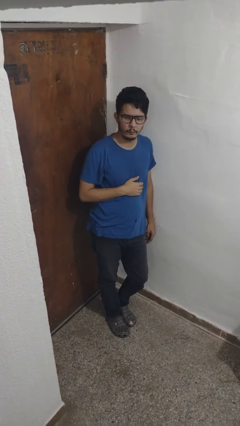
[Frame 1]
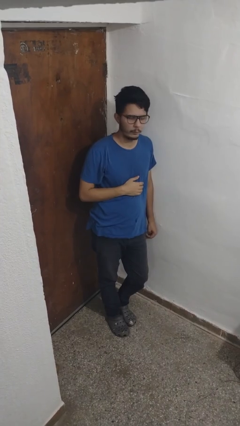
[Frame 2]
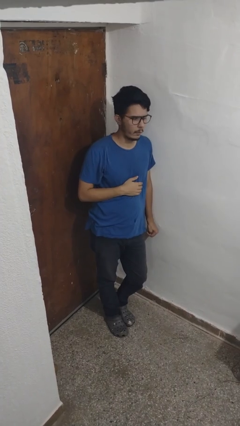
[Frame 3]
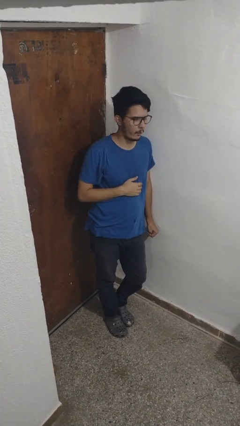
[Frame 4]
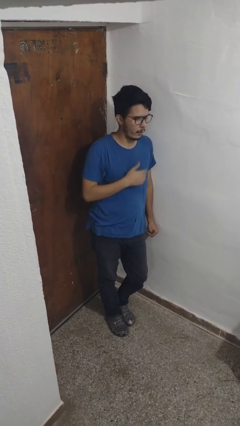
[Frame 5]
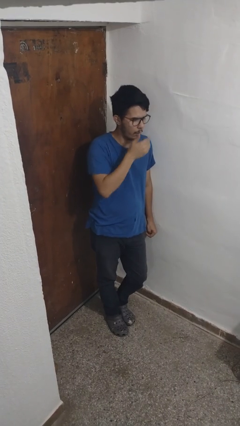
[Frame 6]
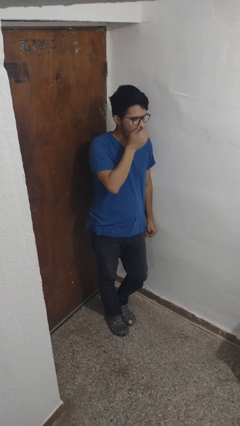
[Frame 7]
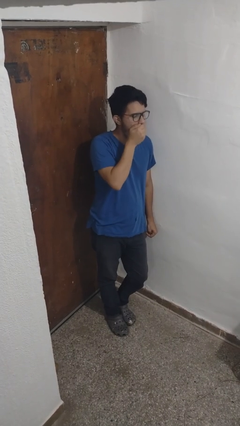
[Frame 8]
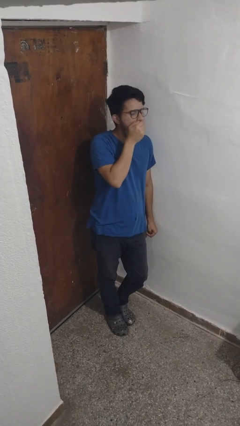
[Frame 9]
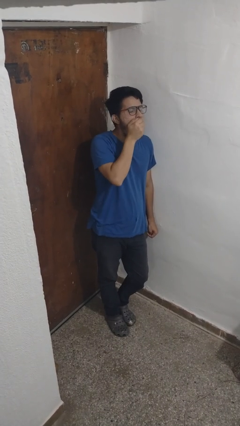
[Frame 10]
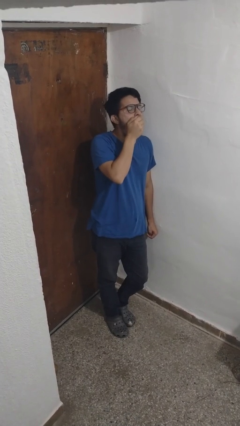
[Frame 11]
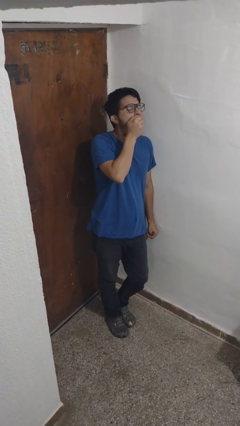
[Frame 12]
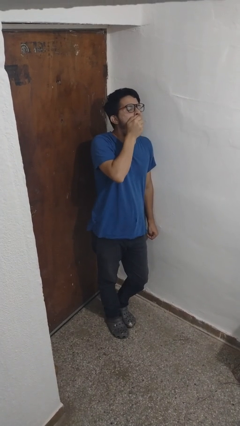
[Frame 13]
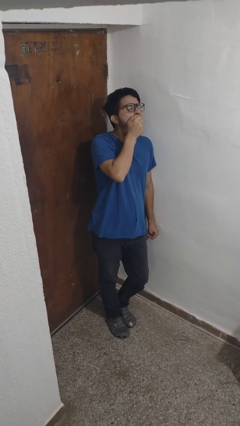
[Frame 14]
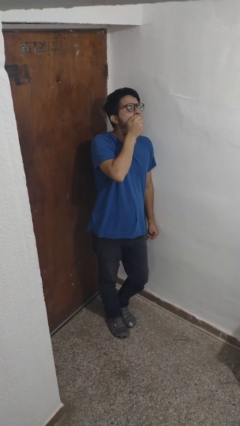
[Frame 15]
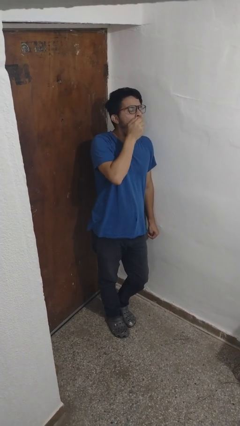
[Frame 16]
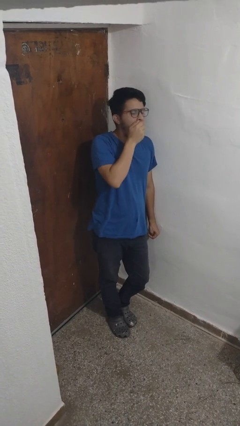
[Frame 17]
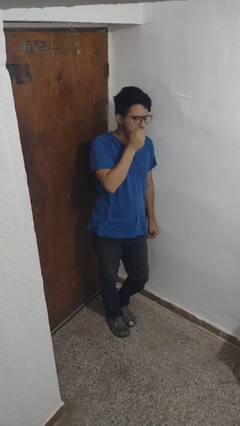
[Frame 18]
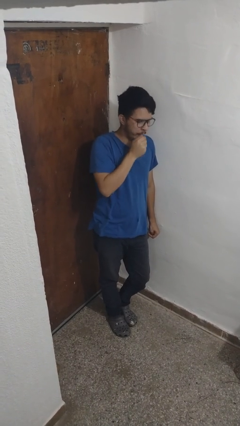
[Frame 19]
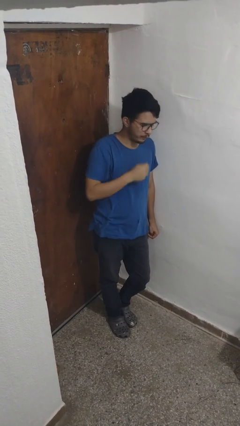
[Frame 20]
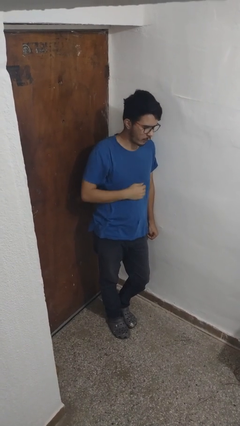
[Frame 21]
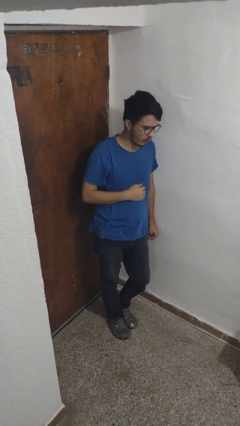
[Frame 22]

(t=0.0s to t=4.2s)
person yawns

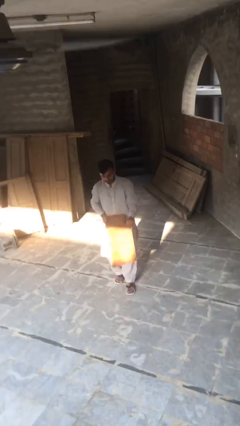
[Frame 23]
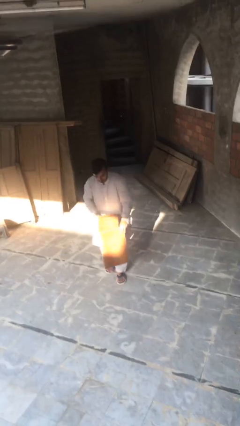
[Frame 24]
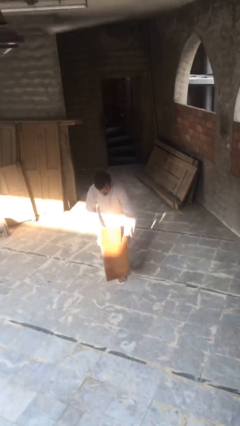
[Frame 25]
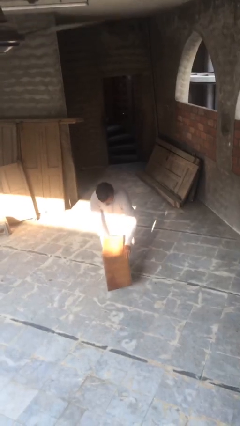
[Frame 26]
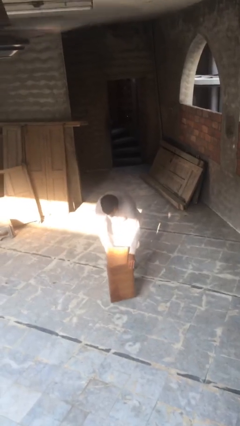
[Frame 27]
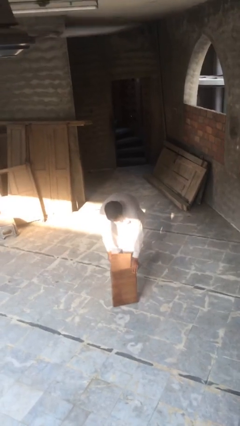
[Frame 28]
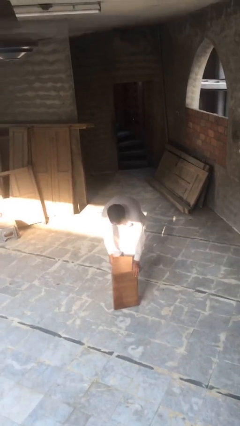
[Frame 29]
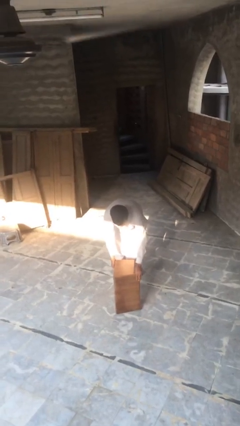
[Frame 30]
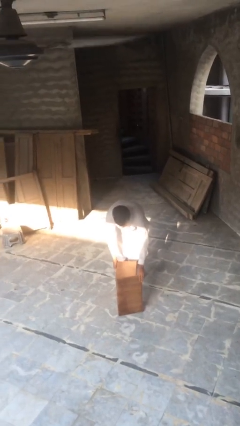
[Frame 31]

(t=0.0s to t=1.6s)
person puts down object on floor

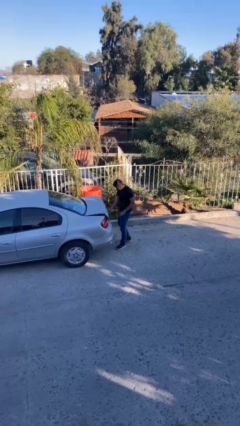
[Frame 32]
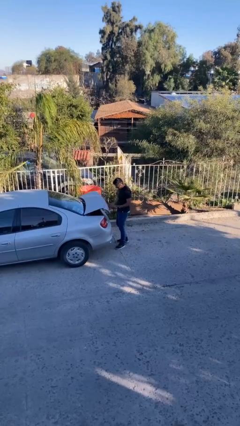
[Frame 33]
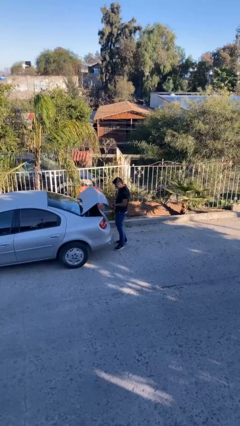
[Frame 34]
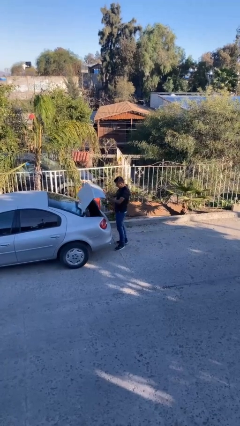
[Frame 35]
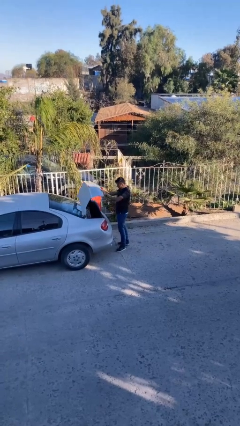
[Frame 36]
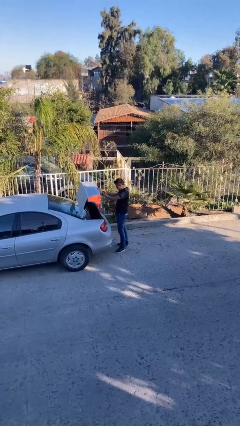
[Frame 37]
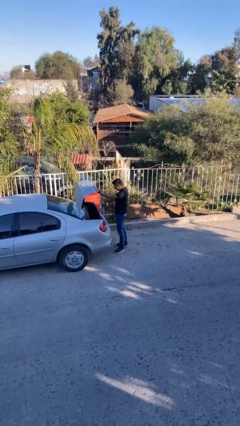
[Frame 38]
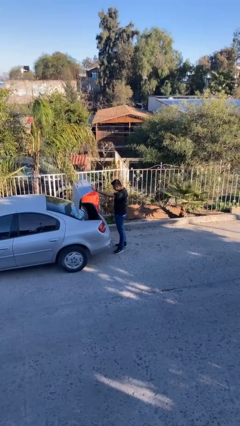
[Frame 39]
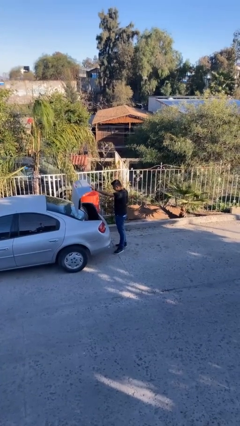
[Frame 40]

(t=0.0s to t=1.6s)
person opens car trunk

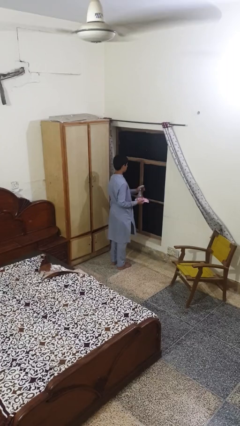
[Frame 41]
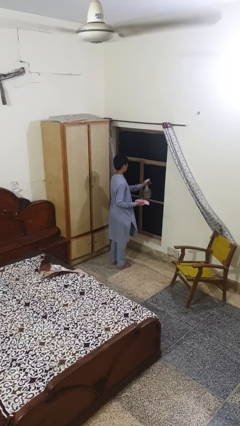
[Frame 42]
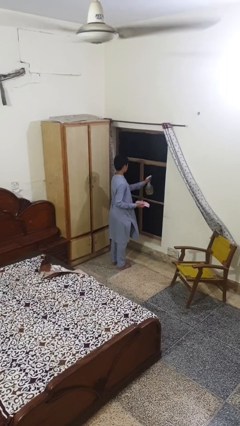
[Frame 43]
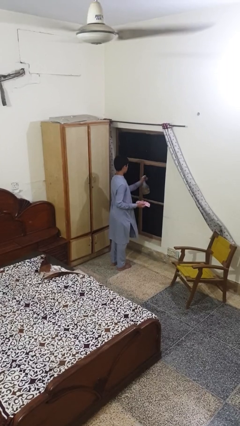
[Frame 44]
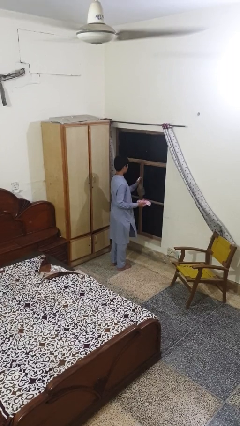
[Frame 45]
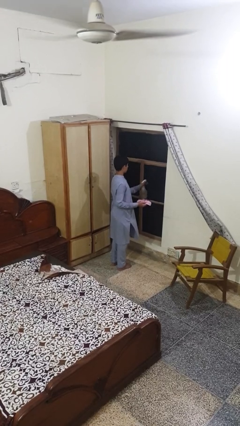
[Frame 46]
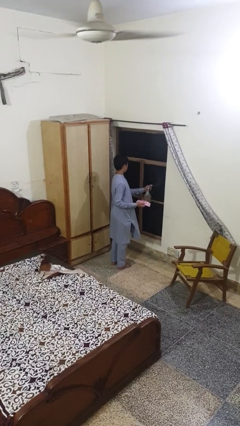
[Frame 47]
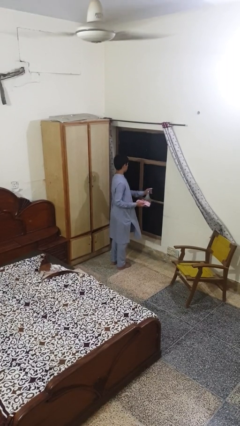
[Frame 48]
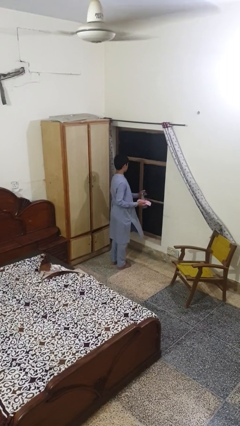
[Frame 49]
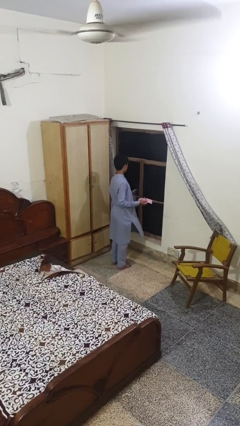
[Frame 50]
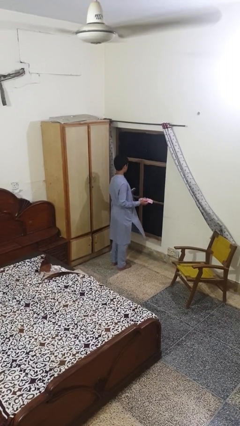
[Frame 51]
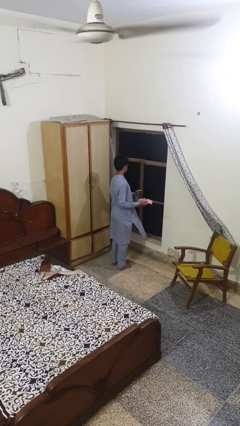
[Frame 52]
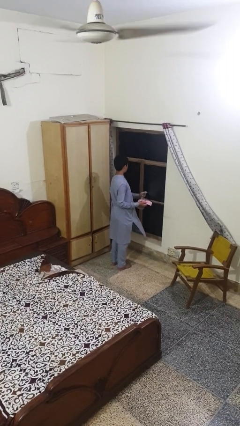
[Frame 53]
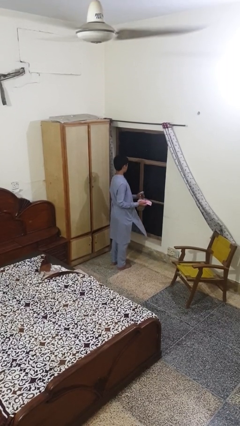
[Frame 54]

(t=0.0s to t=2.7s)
person sprays from bottle

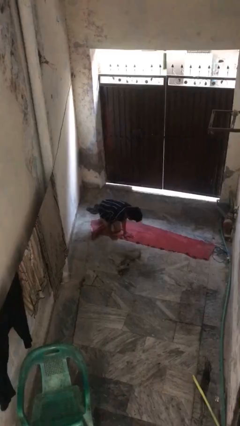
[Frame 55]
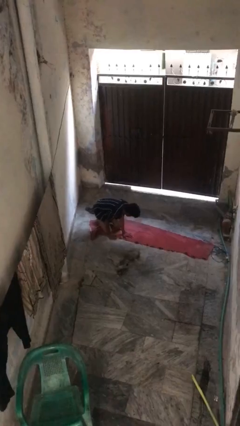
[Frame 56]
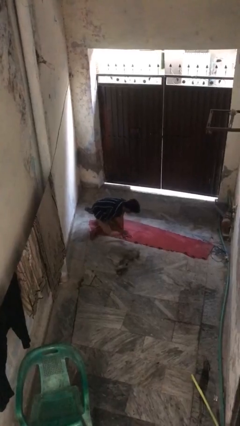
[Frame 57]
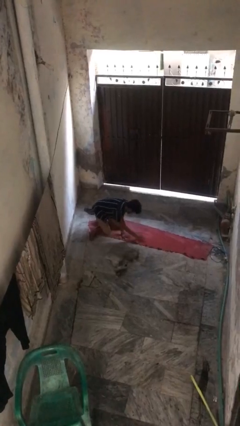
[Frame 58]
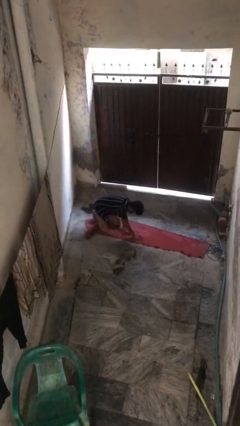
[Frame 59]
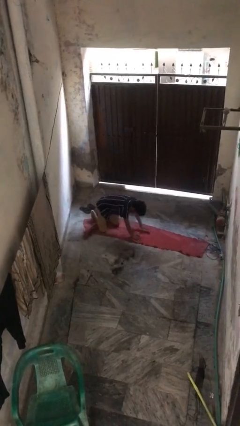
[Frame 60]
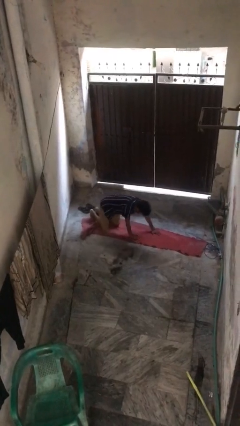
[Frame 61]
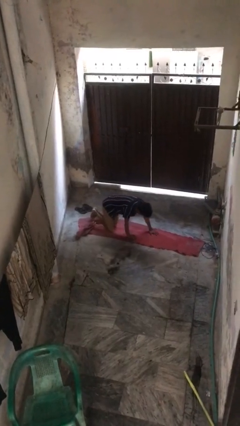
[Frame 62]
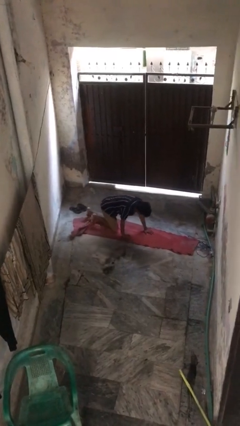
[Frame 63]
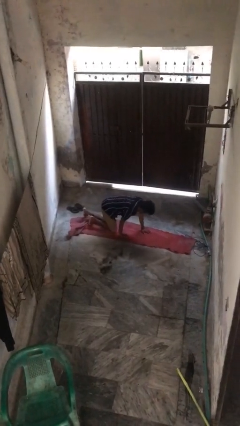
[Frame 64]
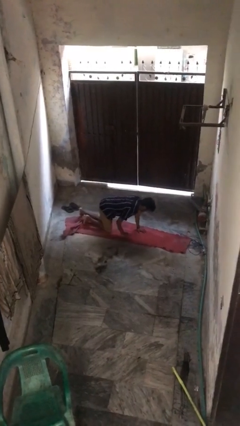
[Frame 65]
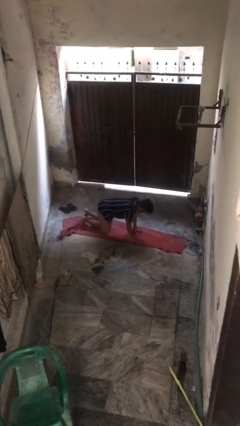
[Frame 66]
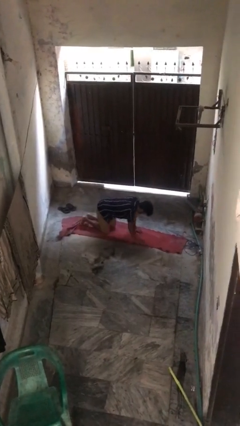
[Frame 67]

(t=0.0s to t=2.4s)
person crawls

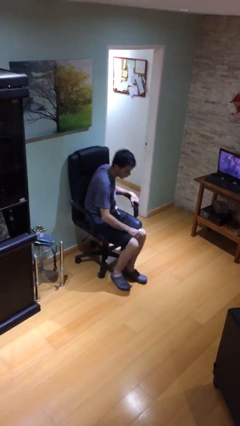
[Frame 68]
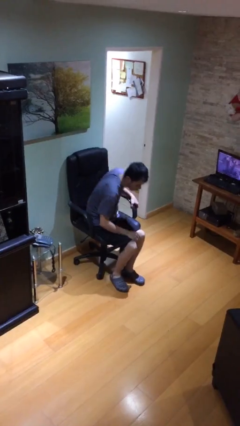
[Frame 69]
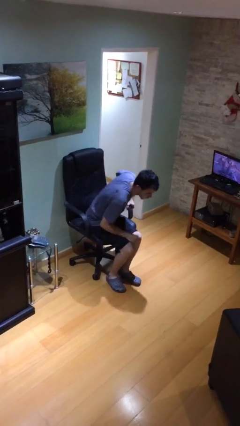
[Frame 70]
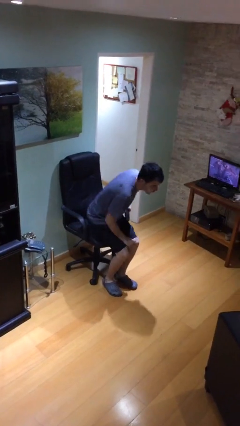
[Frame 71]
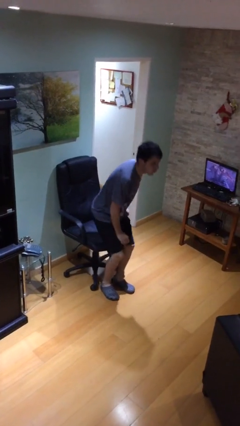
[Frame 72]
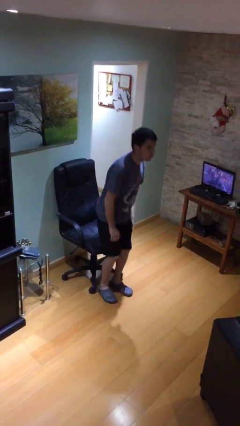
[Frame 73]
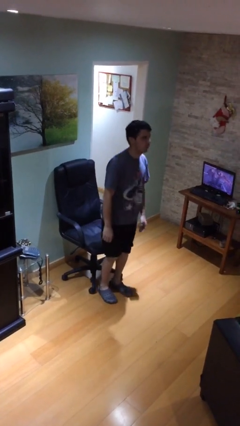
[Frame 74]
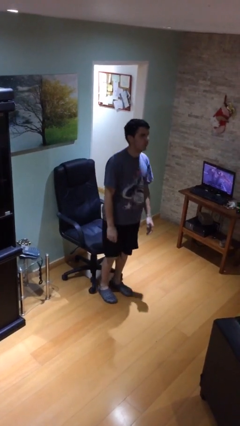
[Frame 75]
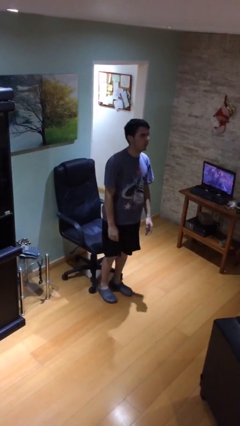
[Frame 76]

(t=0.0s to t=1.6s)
person stands up

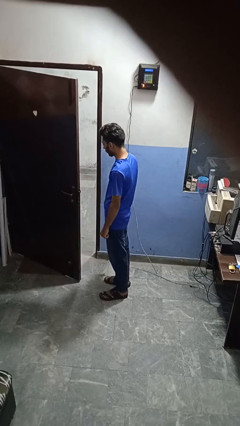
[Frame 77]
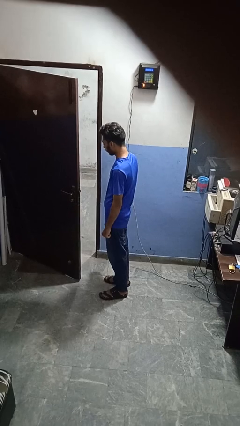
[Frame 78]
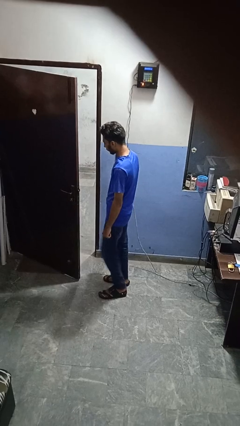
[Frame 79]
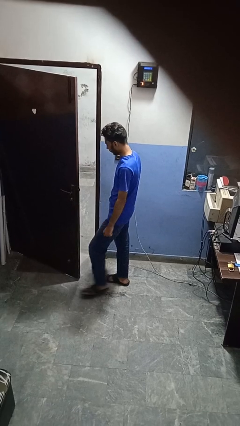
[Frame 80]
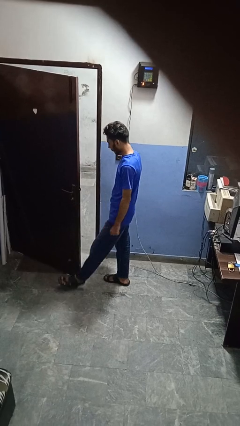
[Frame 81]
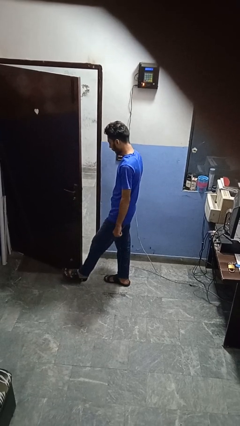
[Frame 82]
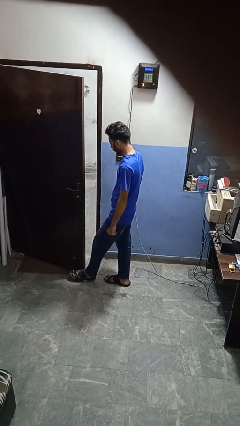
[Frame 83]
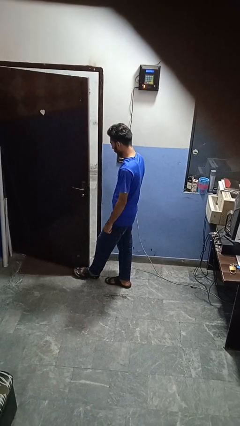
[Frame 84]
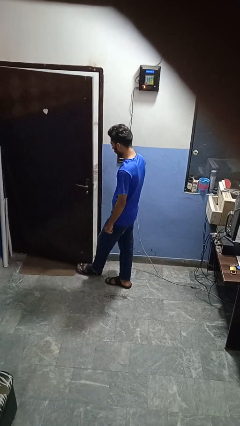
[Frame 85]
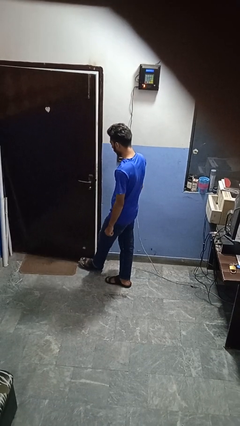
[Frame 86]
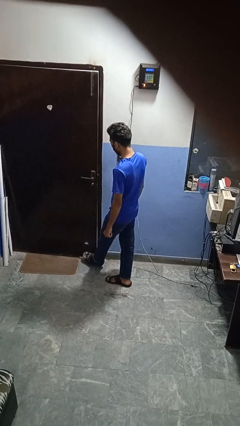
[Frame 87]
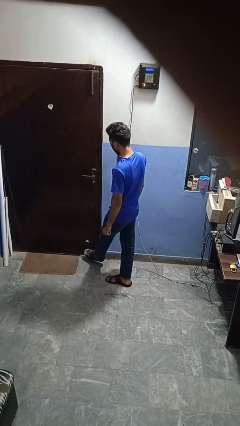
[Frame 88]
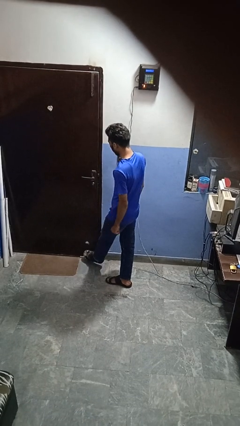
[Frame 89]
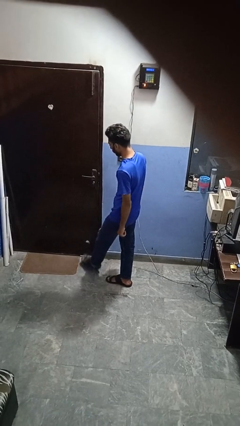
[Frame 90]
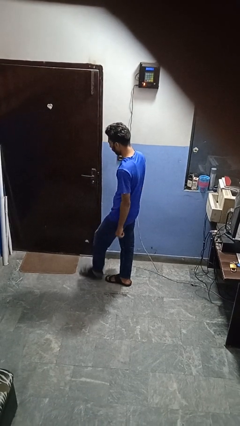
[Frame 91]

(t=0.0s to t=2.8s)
person closes door with foot

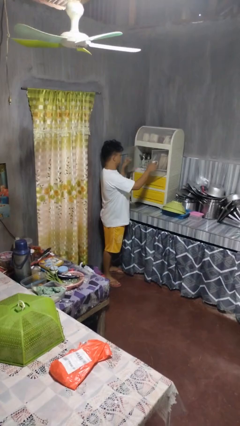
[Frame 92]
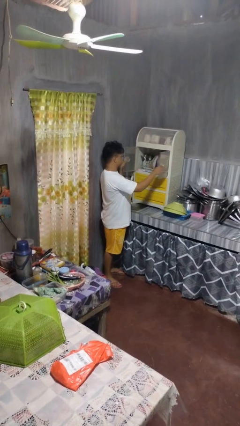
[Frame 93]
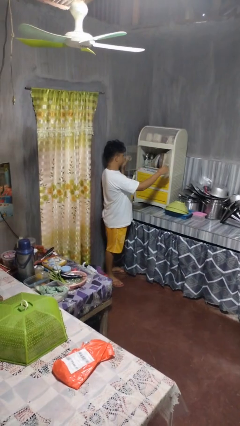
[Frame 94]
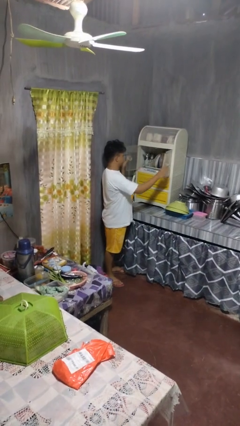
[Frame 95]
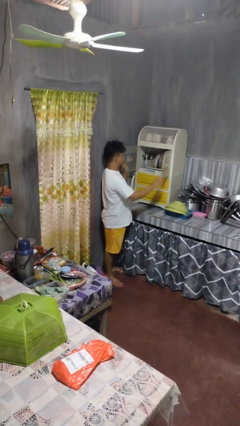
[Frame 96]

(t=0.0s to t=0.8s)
person opens cabinet
